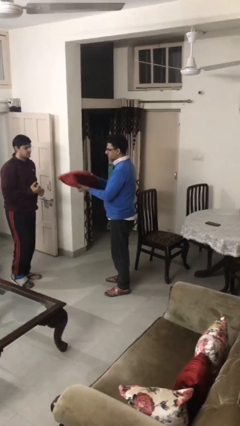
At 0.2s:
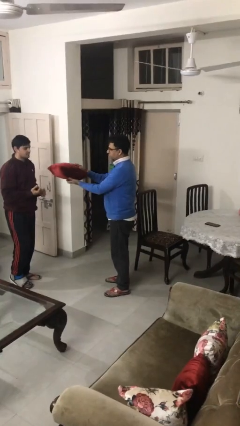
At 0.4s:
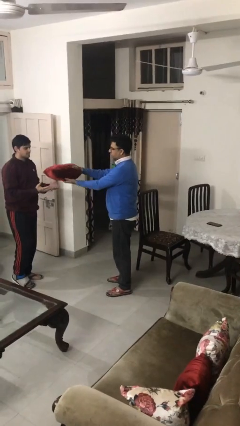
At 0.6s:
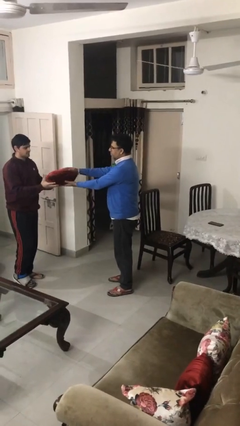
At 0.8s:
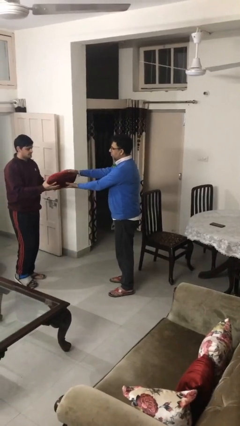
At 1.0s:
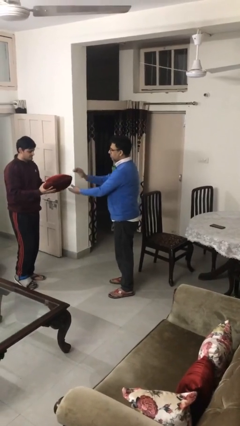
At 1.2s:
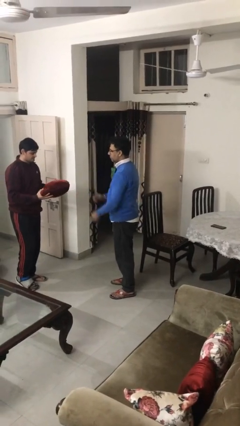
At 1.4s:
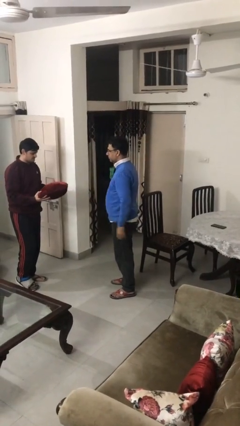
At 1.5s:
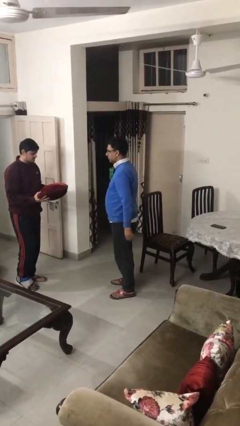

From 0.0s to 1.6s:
person transfers object to person

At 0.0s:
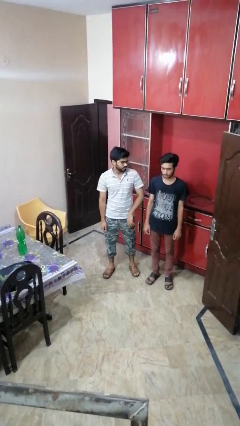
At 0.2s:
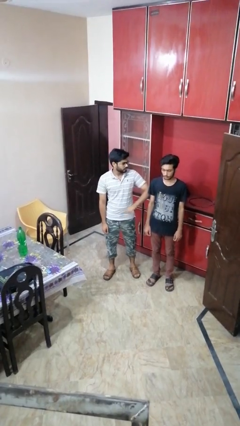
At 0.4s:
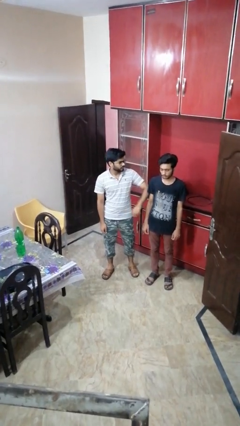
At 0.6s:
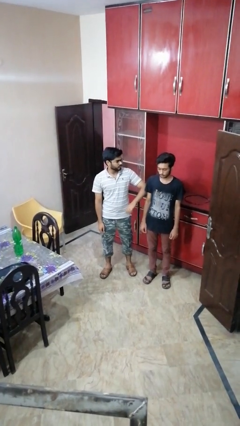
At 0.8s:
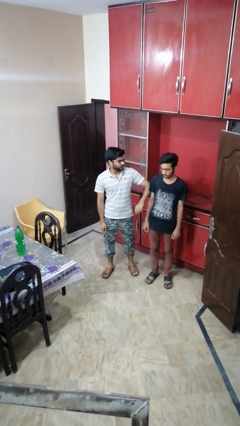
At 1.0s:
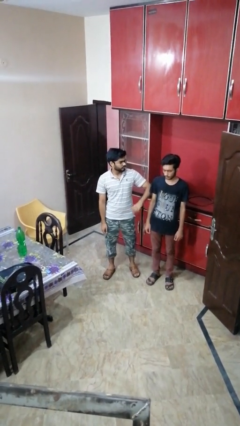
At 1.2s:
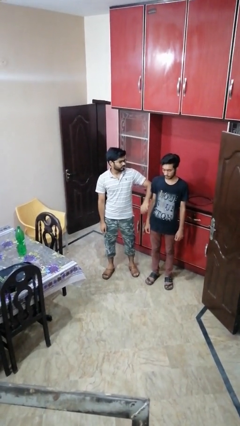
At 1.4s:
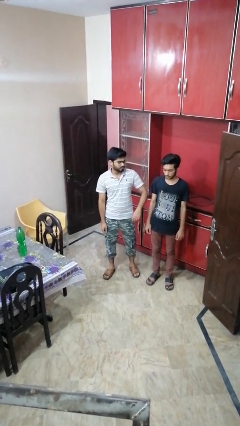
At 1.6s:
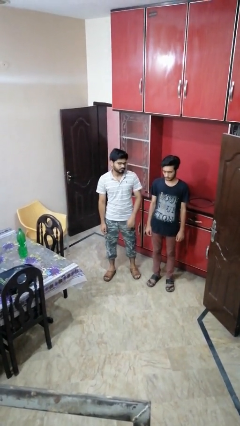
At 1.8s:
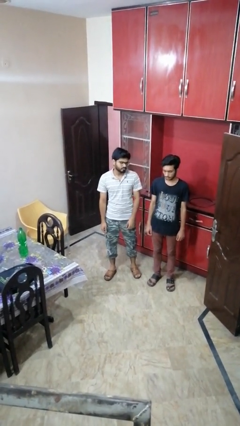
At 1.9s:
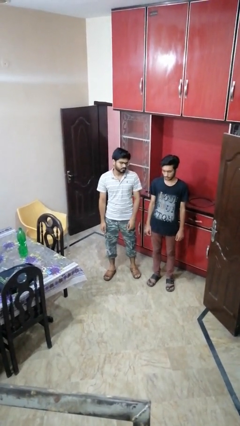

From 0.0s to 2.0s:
person nudges person with elbow

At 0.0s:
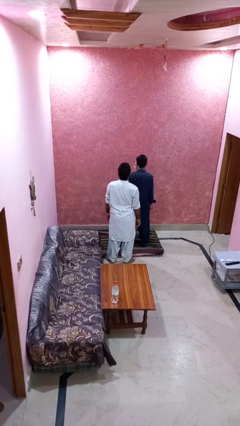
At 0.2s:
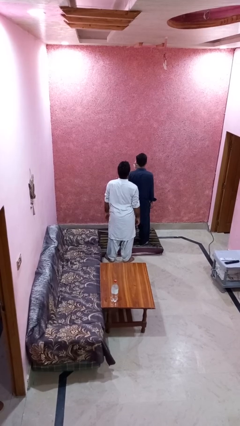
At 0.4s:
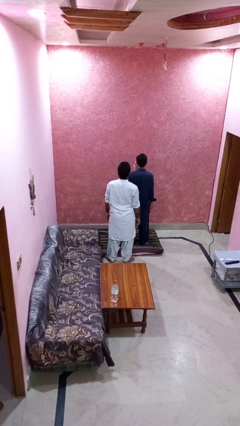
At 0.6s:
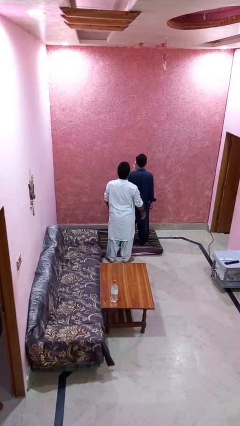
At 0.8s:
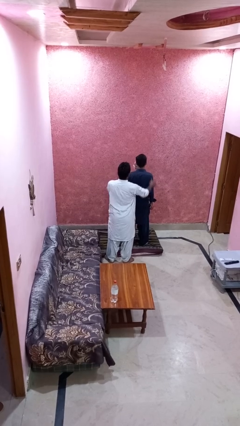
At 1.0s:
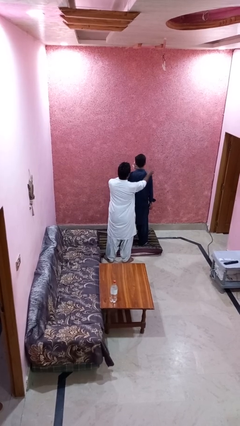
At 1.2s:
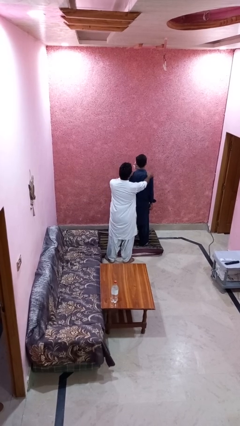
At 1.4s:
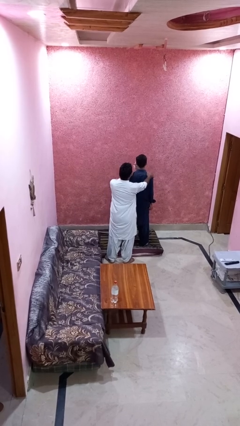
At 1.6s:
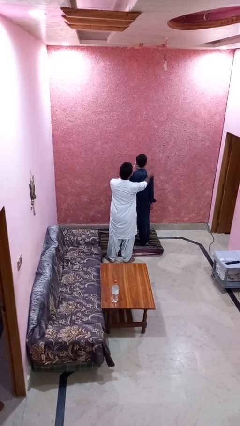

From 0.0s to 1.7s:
person grabs person by shoulder

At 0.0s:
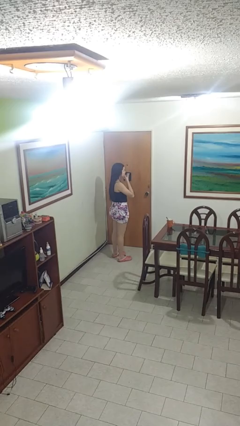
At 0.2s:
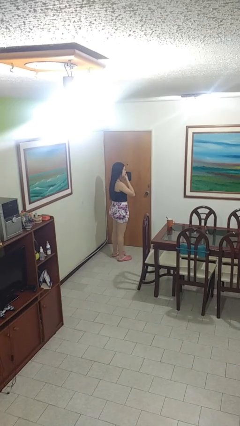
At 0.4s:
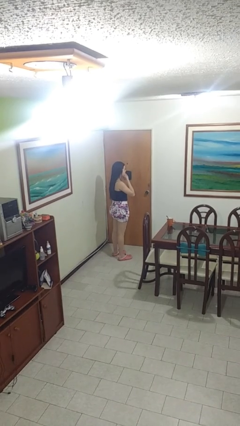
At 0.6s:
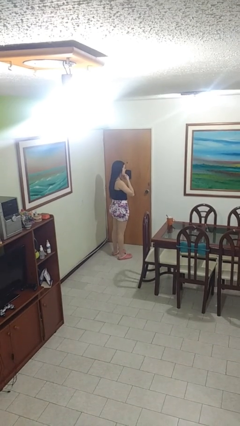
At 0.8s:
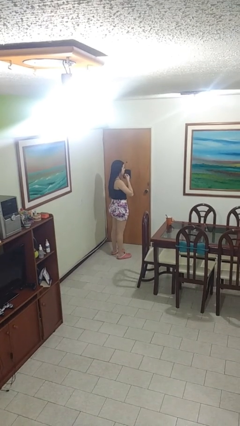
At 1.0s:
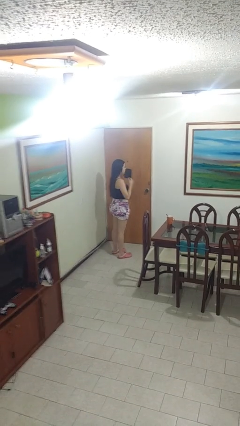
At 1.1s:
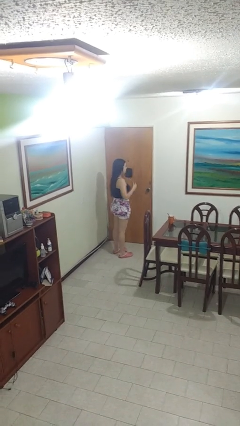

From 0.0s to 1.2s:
person strokes chin

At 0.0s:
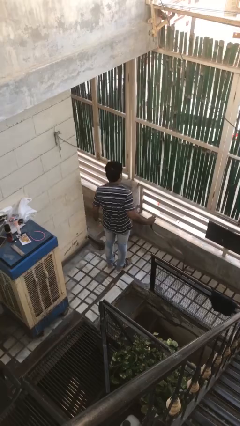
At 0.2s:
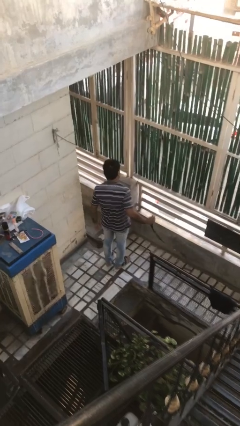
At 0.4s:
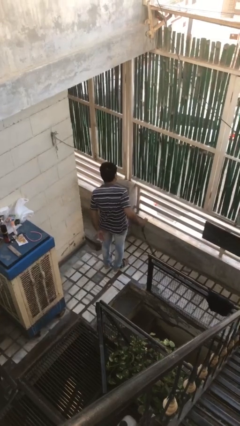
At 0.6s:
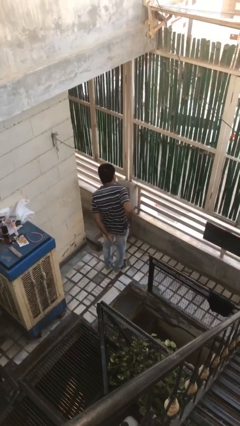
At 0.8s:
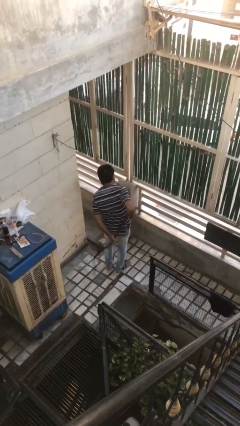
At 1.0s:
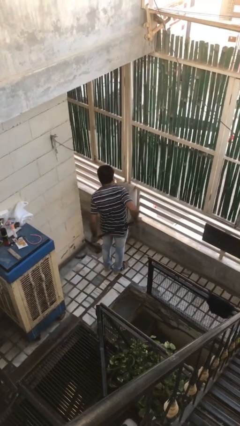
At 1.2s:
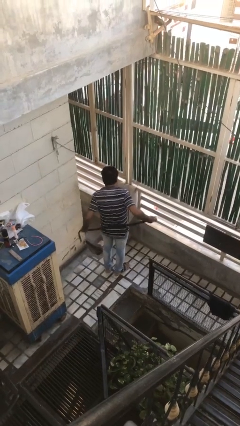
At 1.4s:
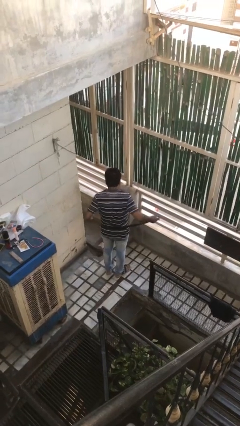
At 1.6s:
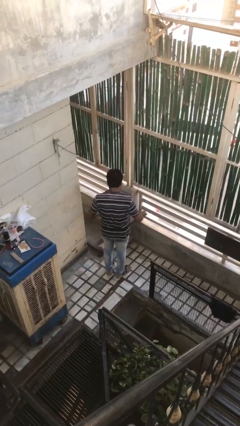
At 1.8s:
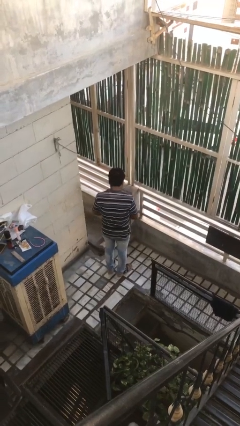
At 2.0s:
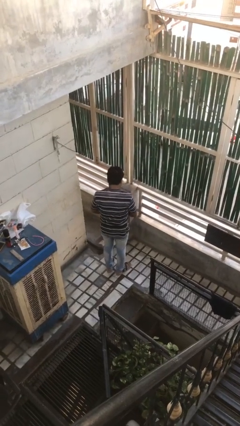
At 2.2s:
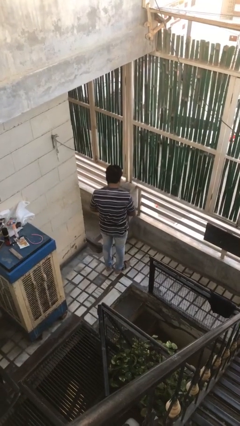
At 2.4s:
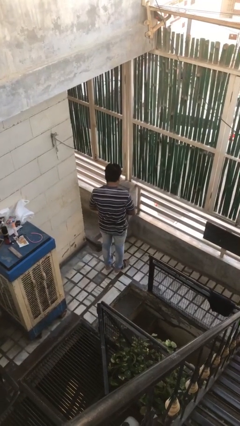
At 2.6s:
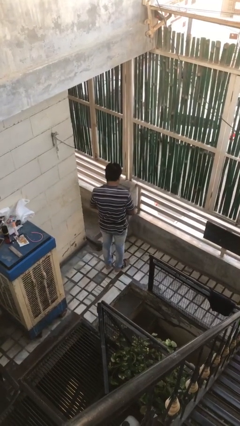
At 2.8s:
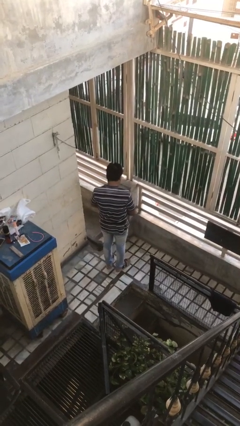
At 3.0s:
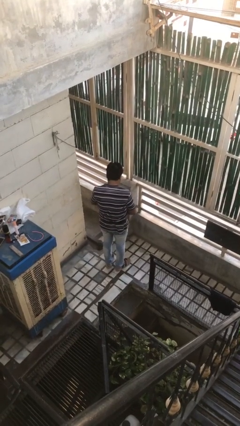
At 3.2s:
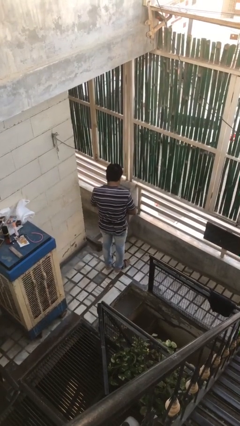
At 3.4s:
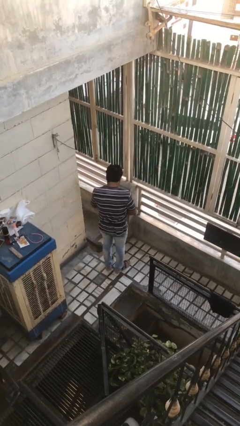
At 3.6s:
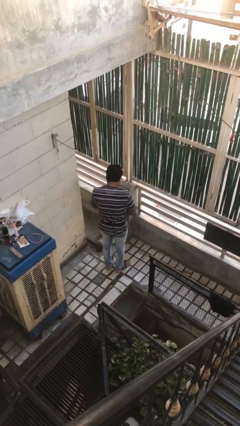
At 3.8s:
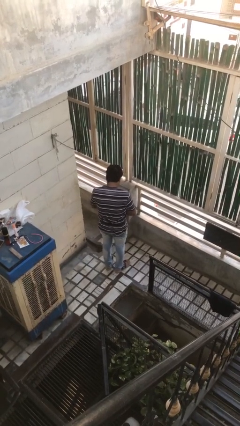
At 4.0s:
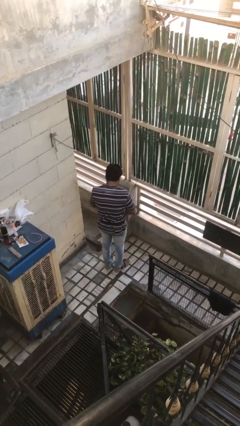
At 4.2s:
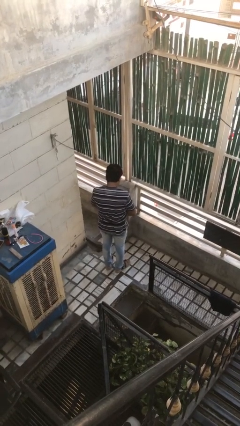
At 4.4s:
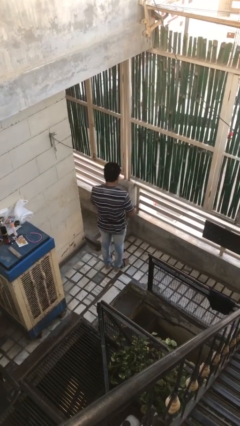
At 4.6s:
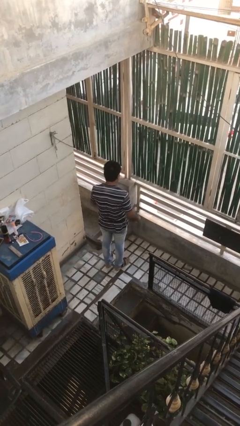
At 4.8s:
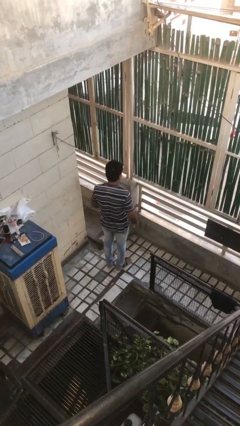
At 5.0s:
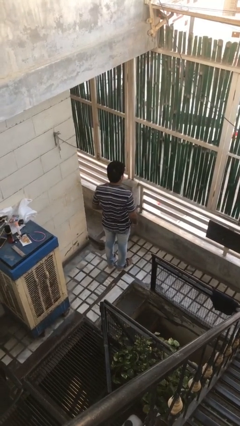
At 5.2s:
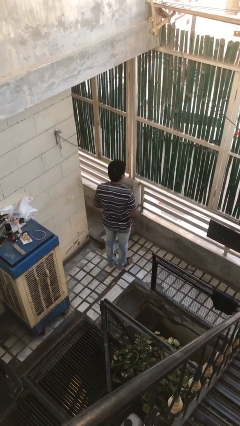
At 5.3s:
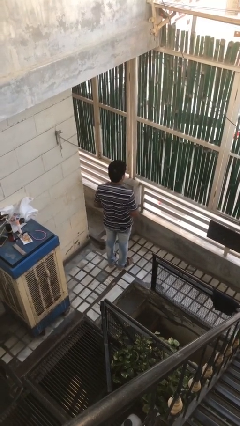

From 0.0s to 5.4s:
person puts on belt

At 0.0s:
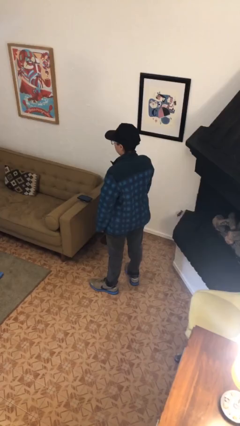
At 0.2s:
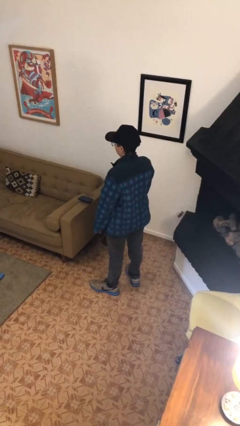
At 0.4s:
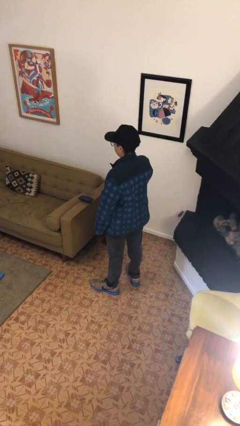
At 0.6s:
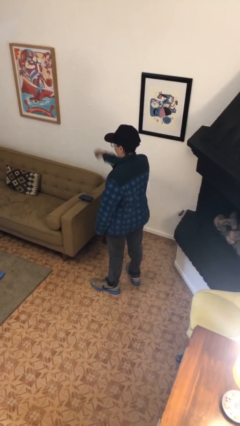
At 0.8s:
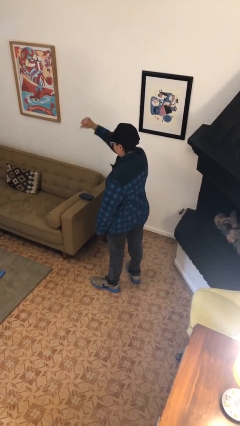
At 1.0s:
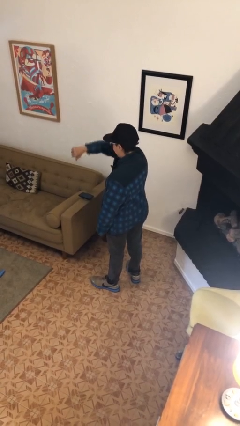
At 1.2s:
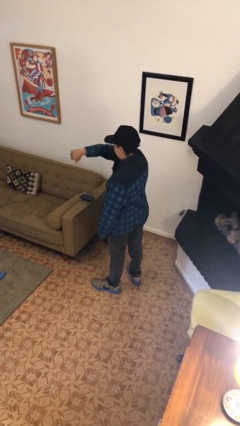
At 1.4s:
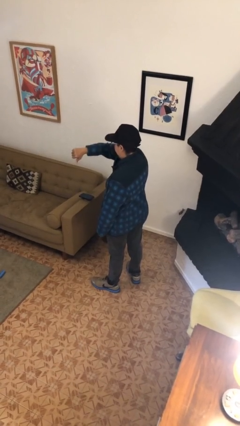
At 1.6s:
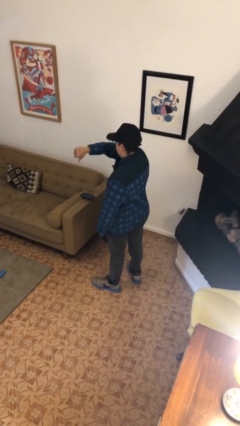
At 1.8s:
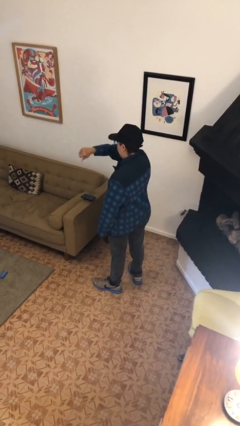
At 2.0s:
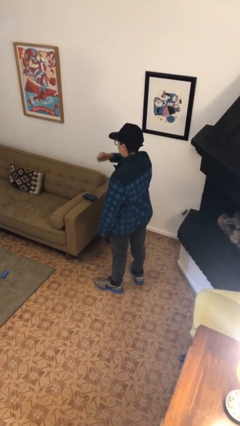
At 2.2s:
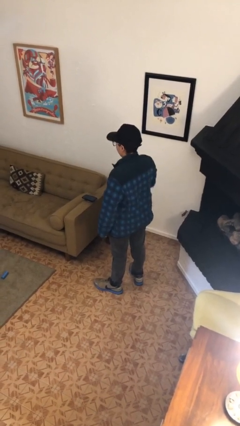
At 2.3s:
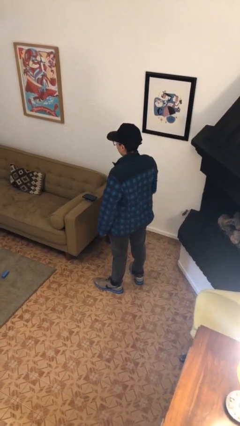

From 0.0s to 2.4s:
person gestures thumbs down

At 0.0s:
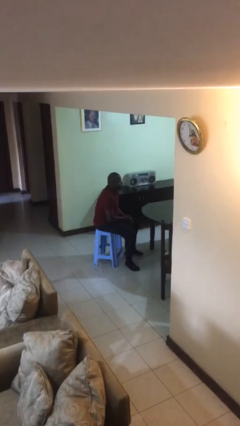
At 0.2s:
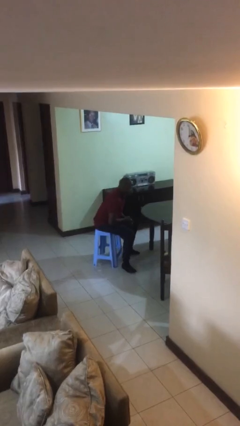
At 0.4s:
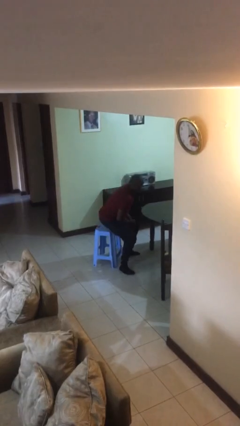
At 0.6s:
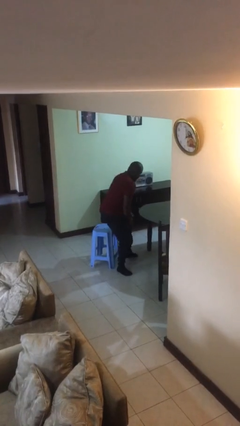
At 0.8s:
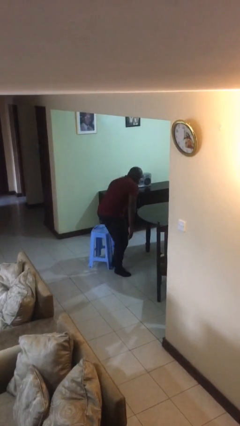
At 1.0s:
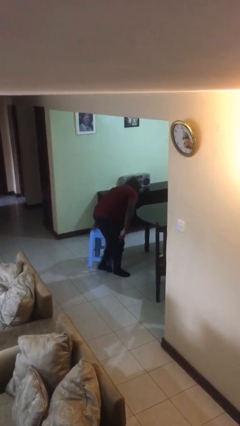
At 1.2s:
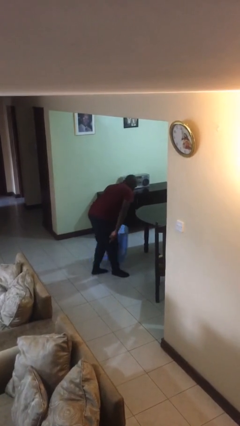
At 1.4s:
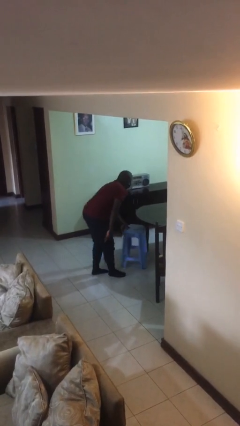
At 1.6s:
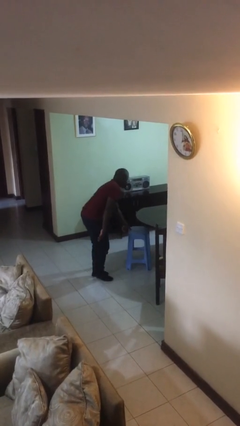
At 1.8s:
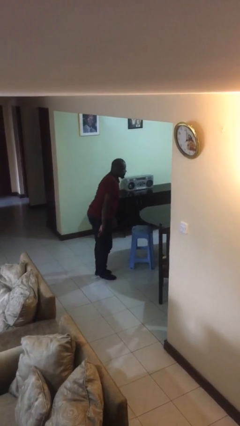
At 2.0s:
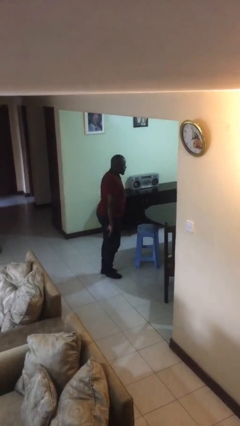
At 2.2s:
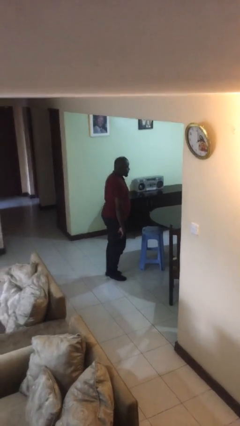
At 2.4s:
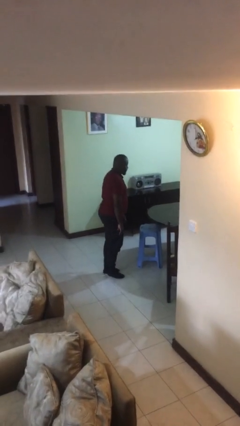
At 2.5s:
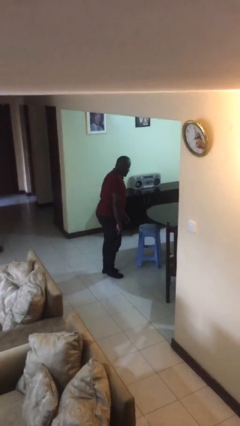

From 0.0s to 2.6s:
person stands up
